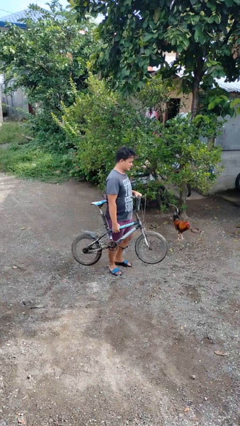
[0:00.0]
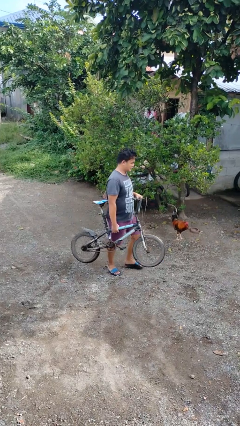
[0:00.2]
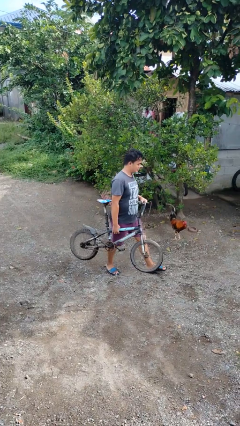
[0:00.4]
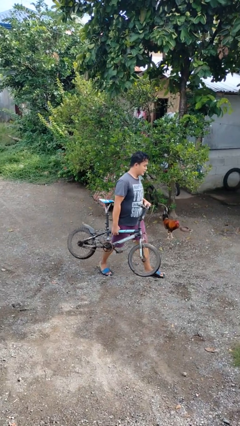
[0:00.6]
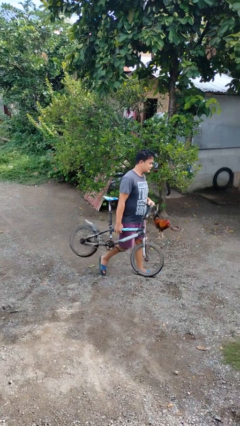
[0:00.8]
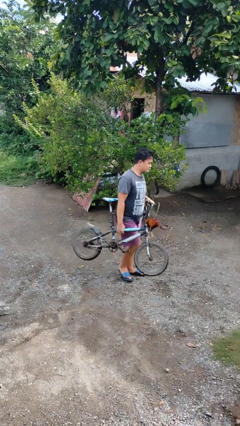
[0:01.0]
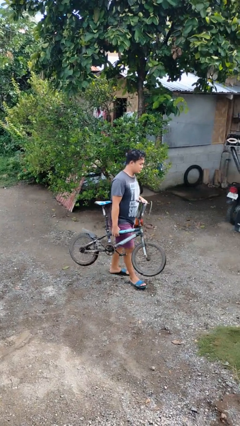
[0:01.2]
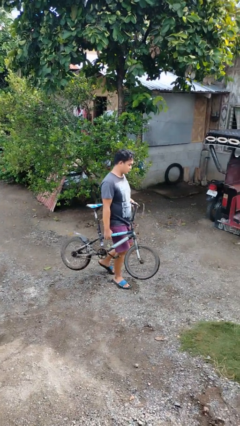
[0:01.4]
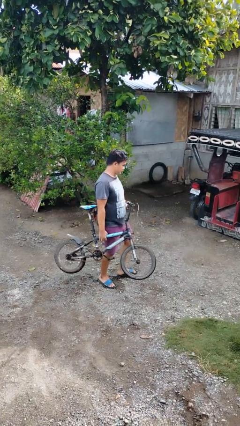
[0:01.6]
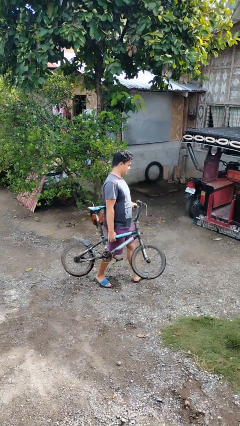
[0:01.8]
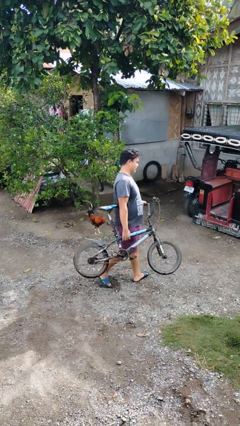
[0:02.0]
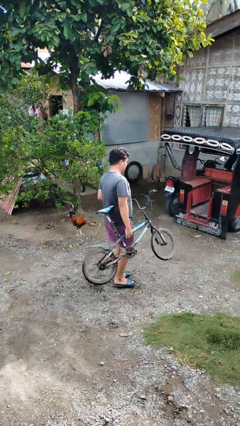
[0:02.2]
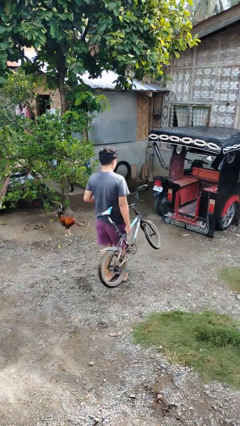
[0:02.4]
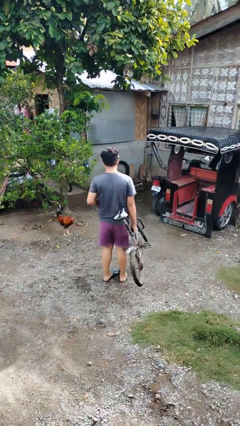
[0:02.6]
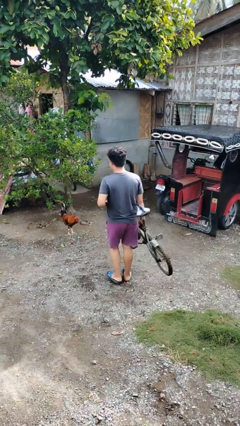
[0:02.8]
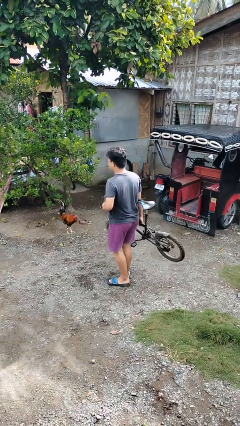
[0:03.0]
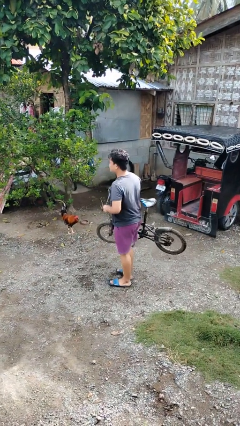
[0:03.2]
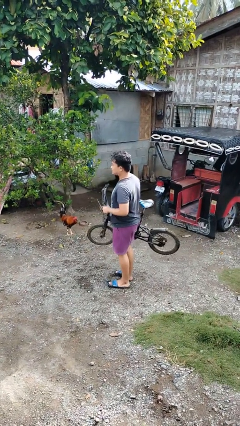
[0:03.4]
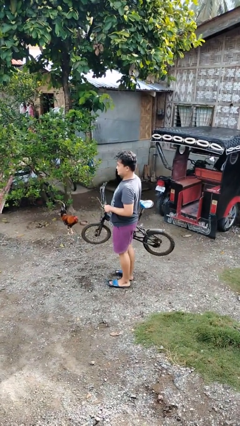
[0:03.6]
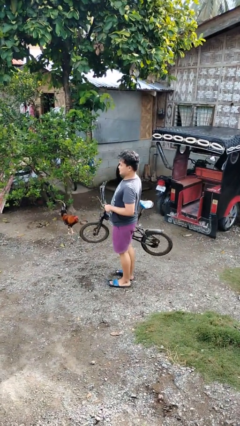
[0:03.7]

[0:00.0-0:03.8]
person carries bicycle

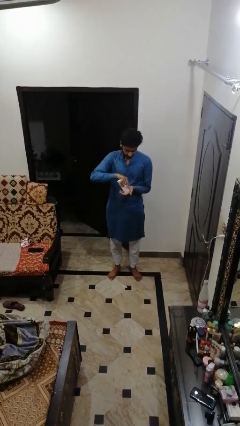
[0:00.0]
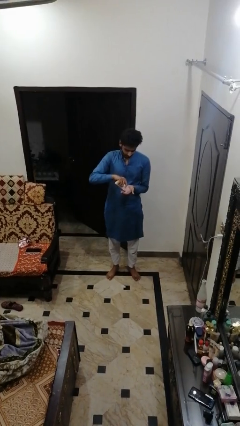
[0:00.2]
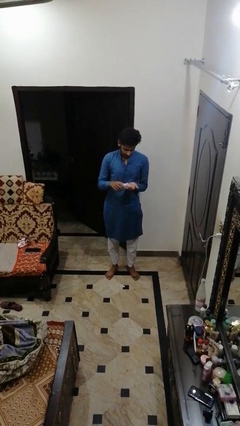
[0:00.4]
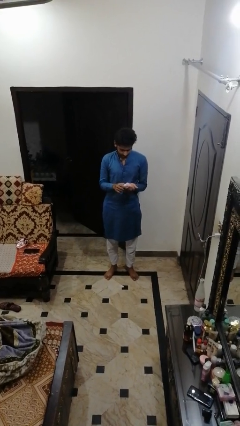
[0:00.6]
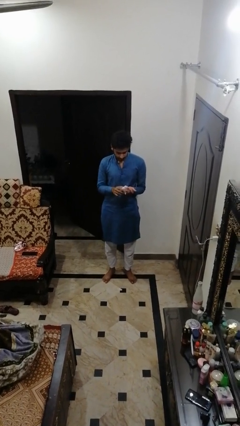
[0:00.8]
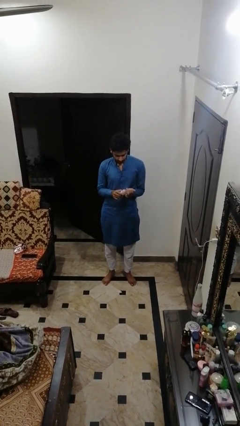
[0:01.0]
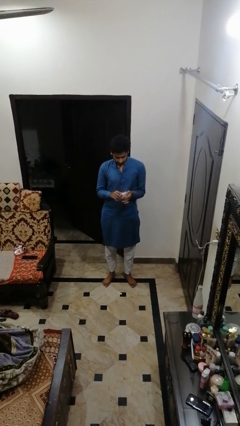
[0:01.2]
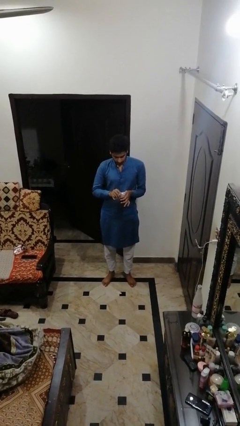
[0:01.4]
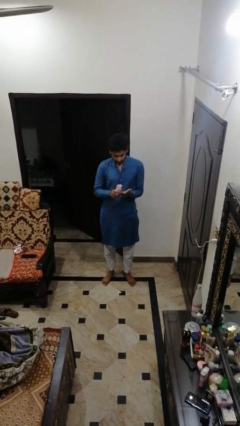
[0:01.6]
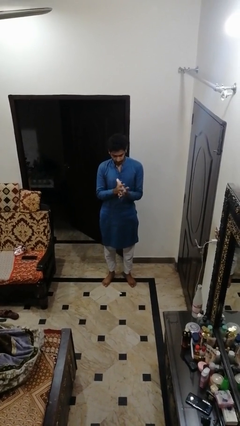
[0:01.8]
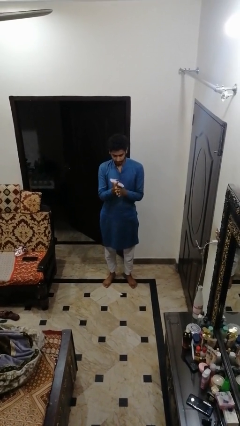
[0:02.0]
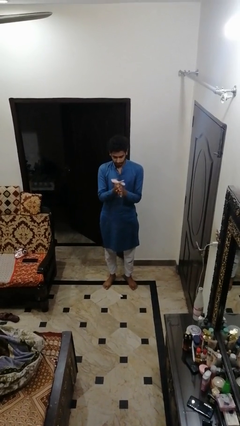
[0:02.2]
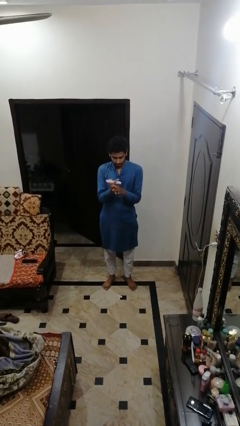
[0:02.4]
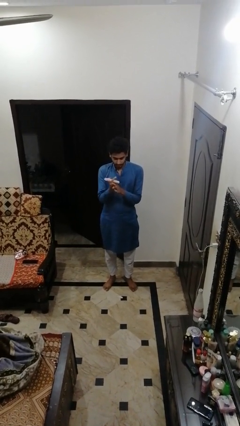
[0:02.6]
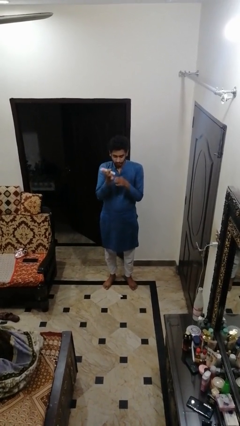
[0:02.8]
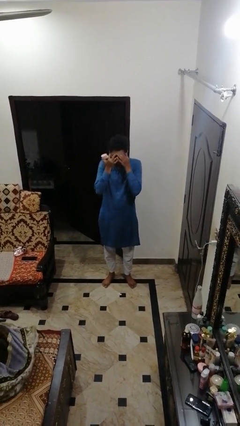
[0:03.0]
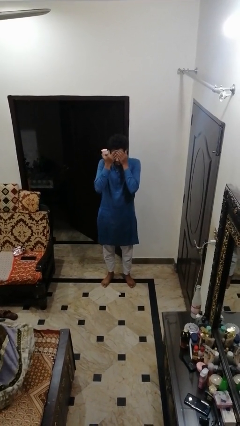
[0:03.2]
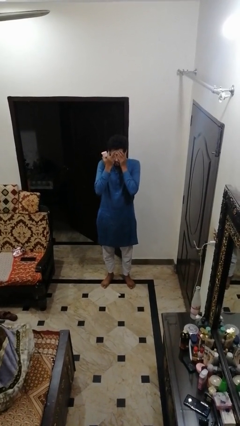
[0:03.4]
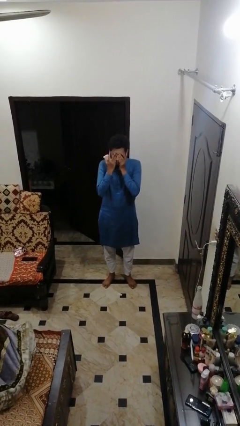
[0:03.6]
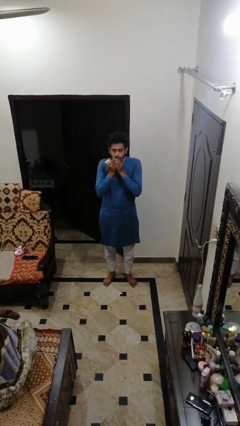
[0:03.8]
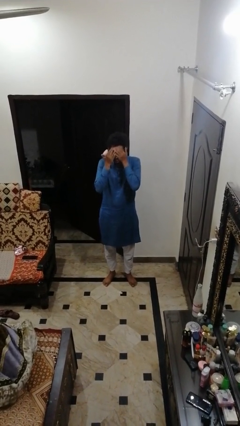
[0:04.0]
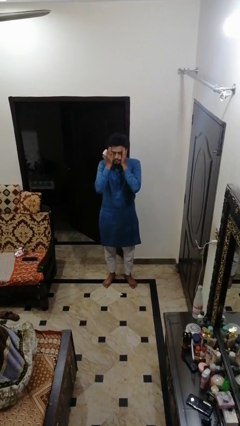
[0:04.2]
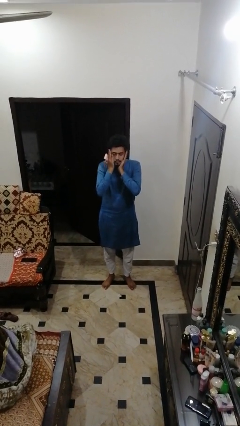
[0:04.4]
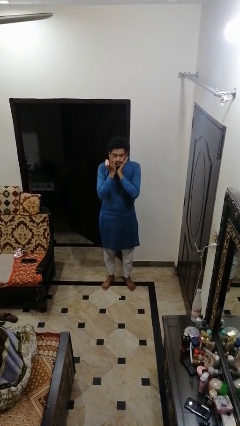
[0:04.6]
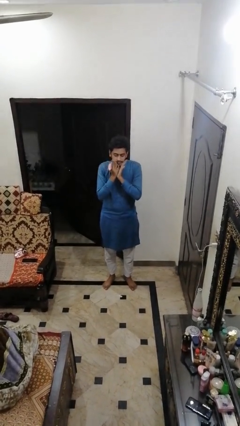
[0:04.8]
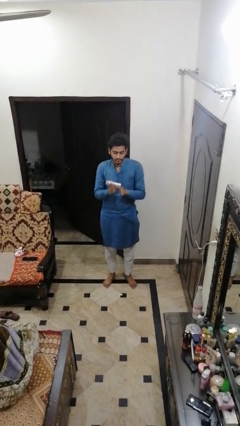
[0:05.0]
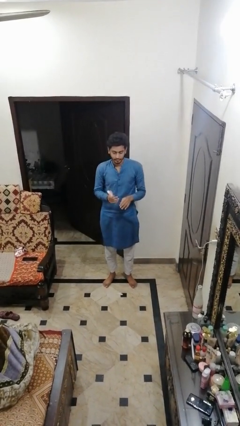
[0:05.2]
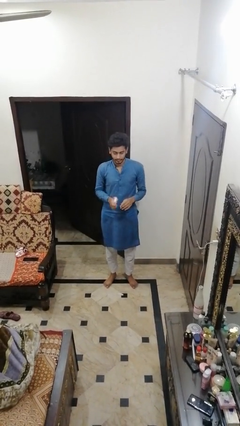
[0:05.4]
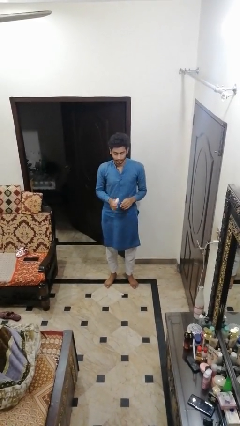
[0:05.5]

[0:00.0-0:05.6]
person applies facial moisturizer

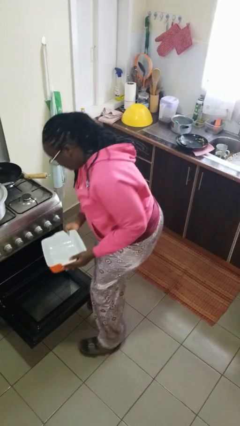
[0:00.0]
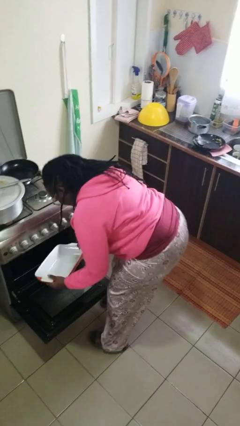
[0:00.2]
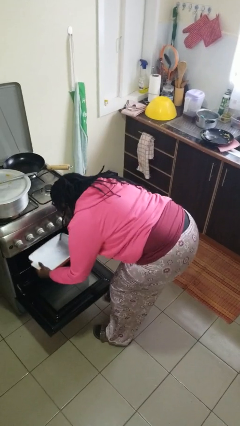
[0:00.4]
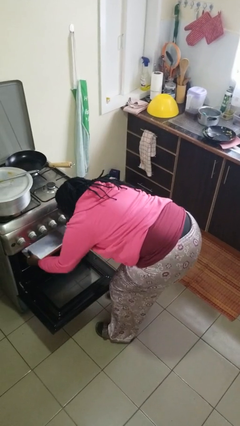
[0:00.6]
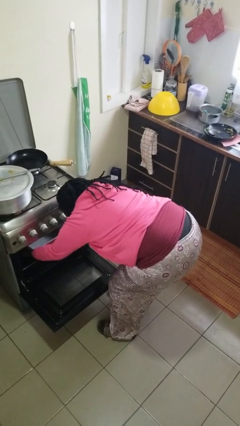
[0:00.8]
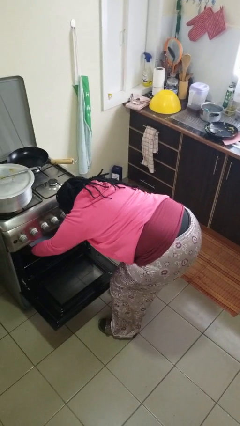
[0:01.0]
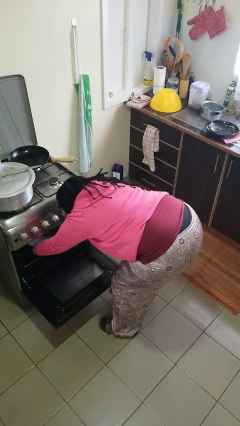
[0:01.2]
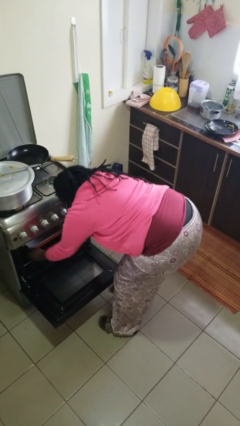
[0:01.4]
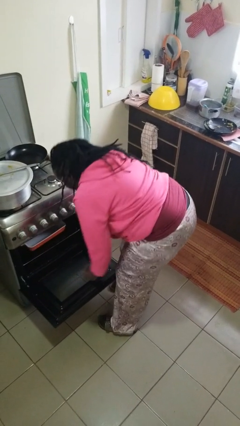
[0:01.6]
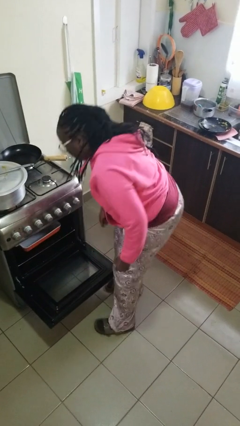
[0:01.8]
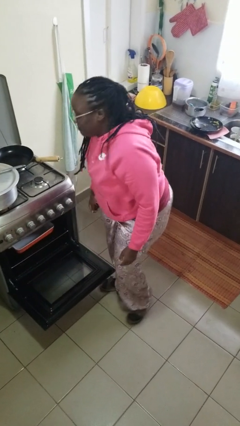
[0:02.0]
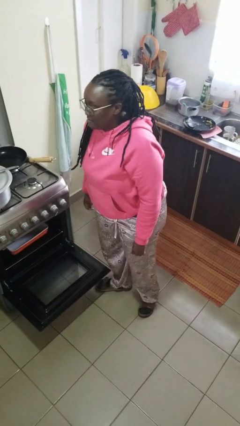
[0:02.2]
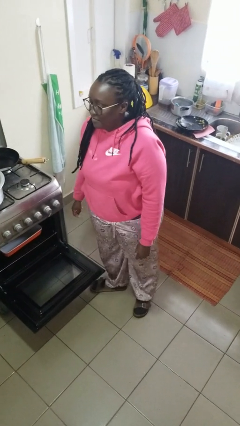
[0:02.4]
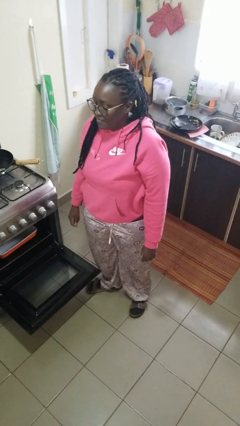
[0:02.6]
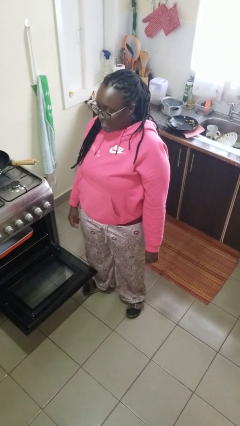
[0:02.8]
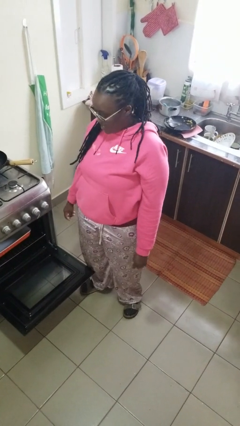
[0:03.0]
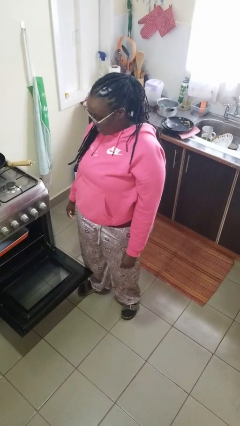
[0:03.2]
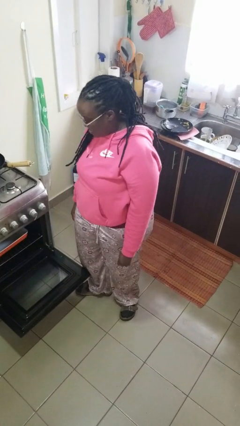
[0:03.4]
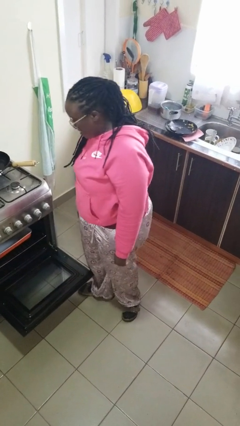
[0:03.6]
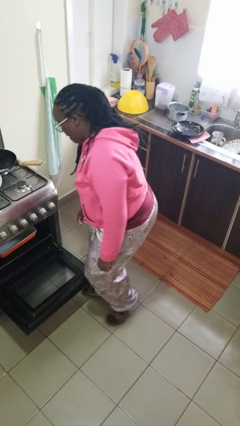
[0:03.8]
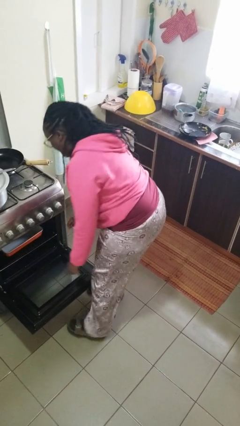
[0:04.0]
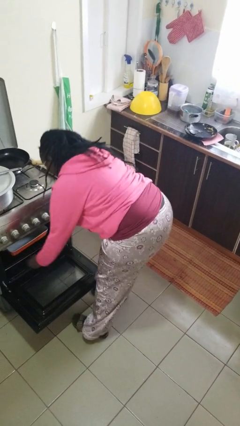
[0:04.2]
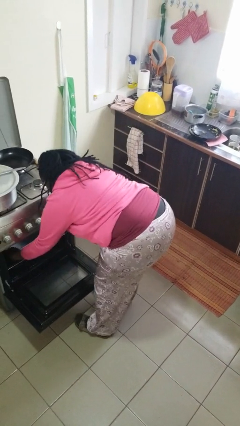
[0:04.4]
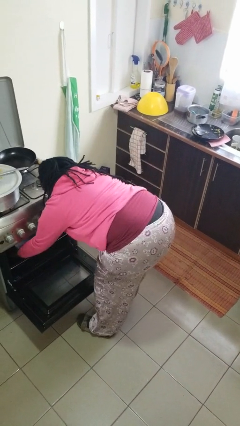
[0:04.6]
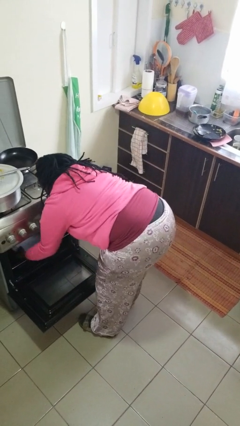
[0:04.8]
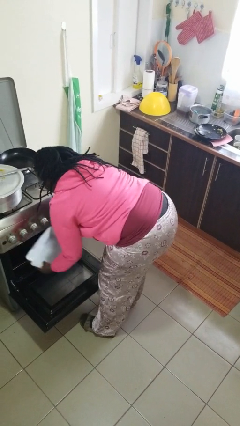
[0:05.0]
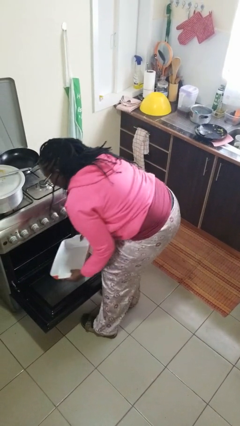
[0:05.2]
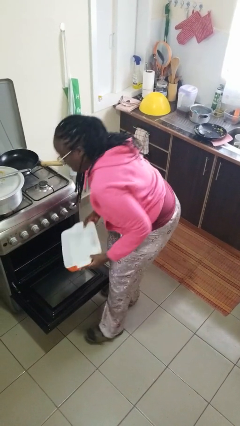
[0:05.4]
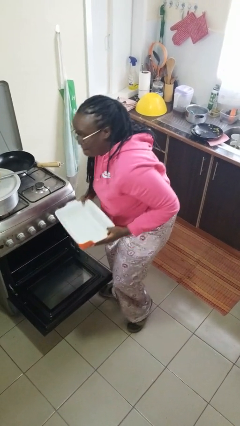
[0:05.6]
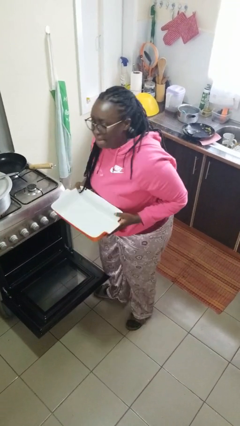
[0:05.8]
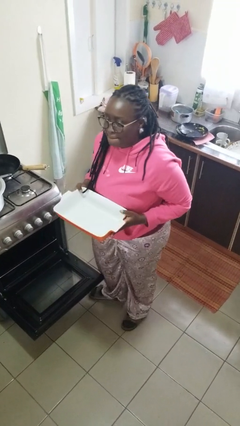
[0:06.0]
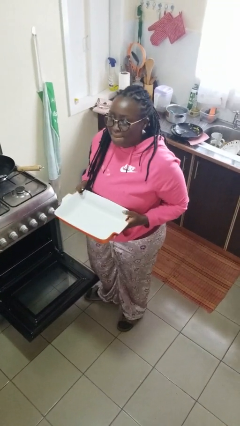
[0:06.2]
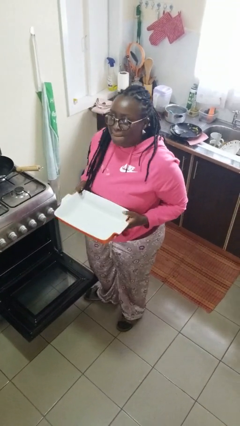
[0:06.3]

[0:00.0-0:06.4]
person takes object from oven

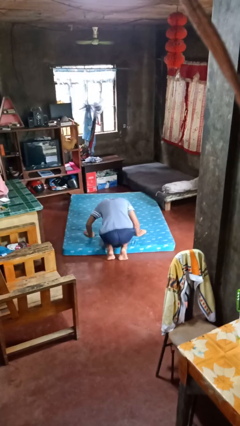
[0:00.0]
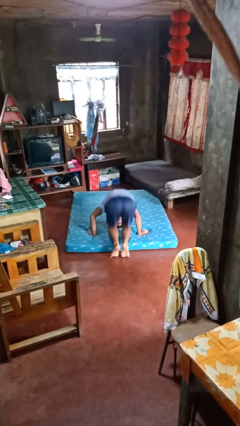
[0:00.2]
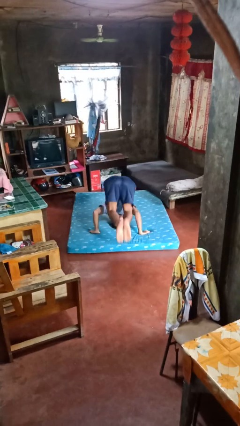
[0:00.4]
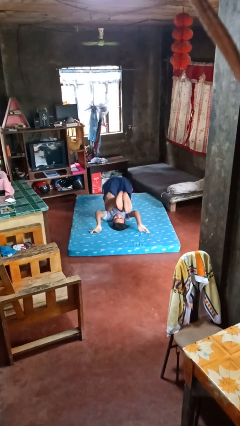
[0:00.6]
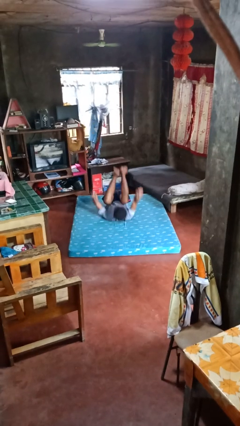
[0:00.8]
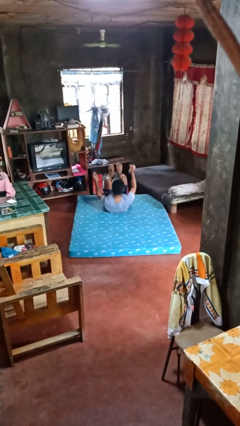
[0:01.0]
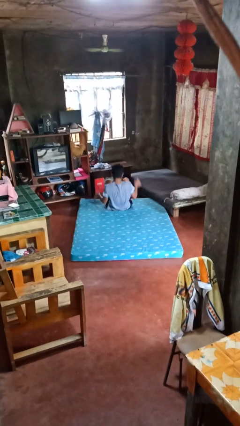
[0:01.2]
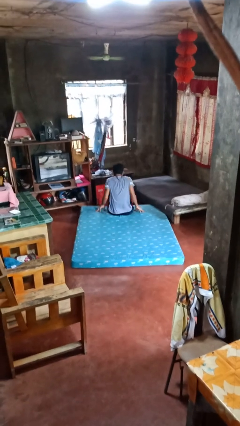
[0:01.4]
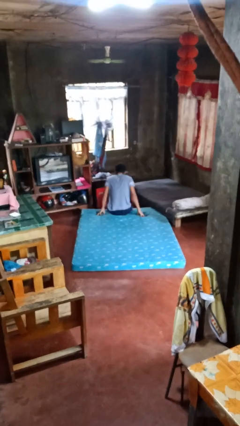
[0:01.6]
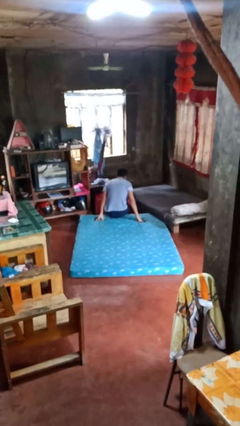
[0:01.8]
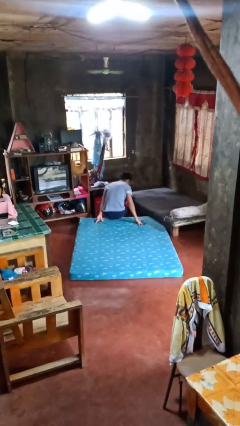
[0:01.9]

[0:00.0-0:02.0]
person somersaults
